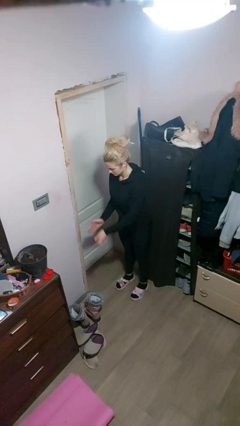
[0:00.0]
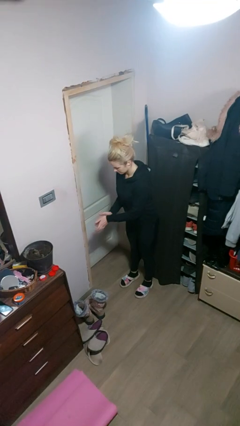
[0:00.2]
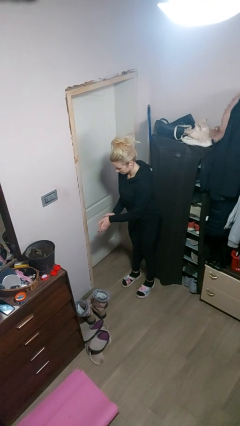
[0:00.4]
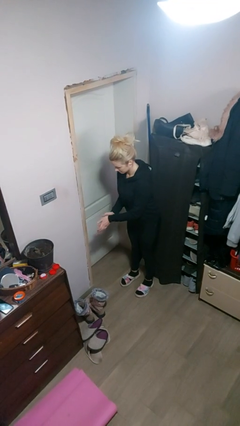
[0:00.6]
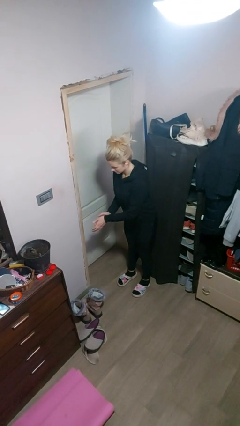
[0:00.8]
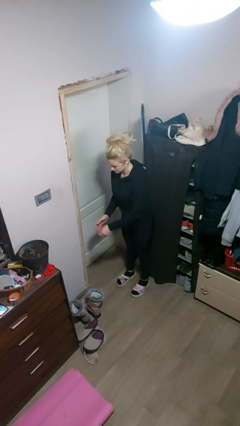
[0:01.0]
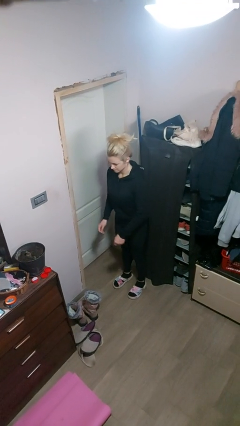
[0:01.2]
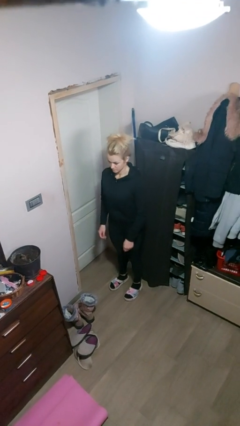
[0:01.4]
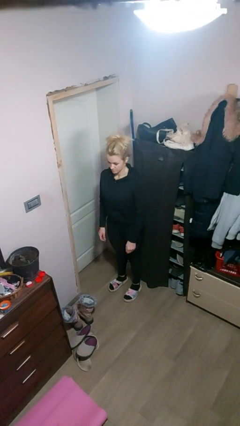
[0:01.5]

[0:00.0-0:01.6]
person claps hands

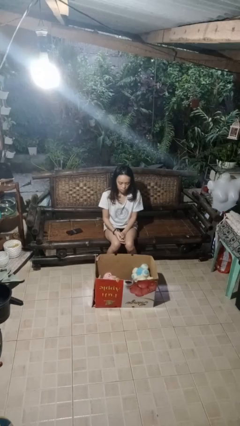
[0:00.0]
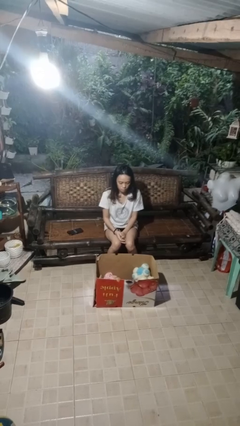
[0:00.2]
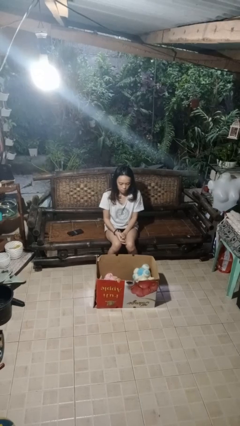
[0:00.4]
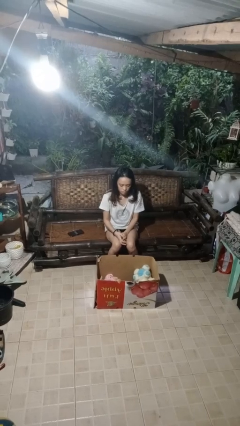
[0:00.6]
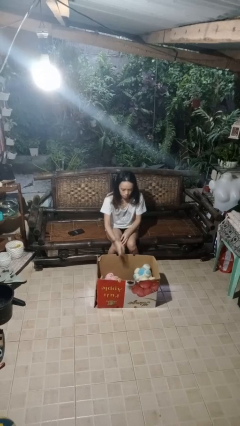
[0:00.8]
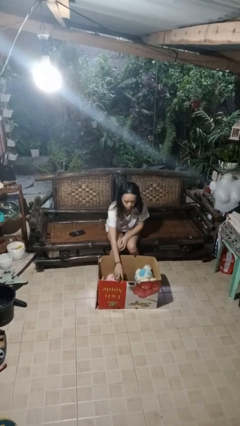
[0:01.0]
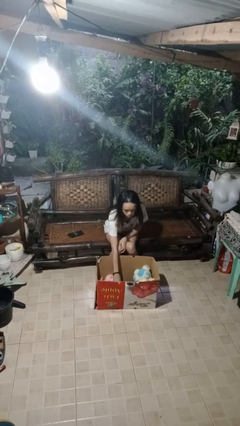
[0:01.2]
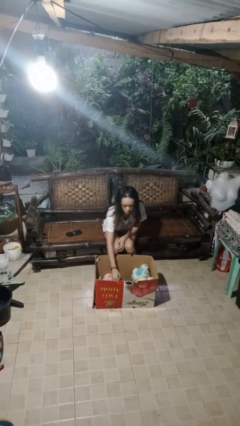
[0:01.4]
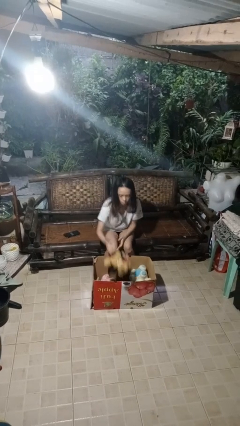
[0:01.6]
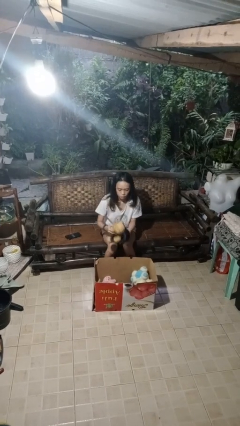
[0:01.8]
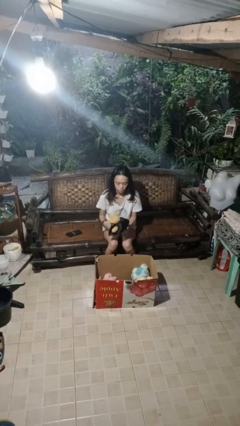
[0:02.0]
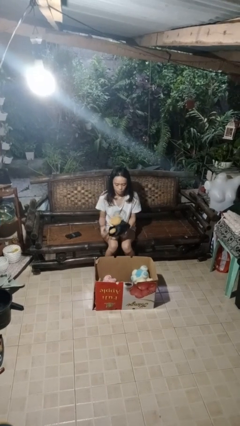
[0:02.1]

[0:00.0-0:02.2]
person takes object from box

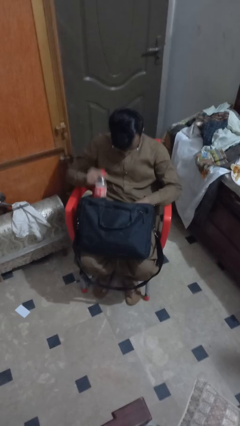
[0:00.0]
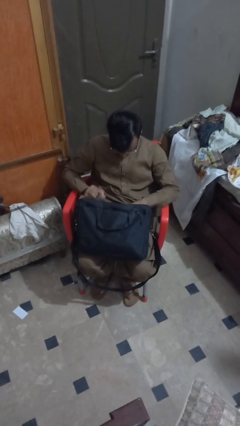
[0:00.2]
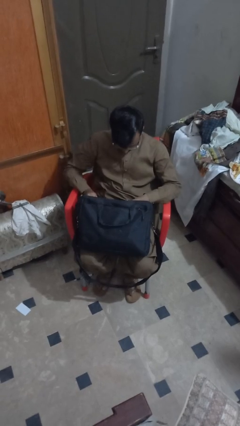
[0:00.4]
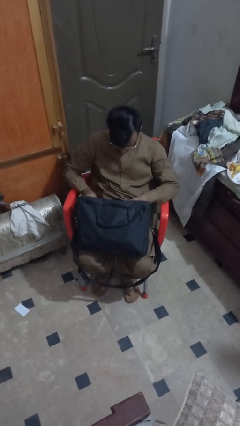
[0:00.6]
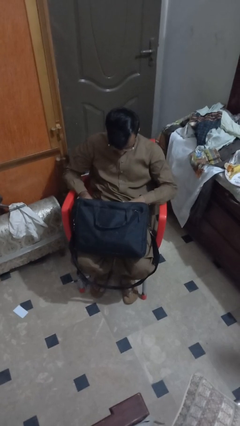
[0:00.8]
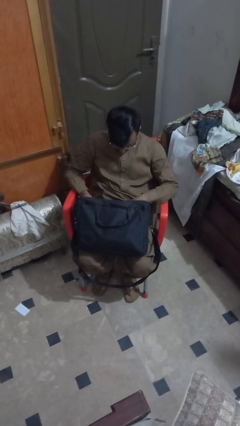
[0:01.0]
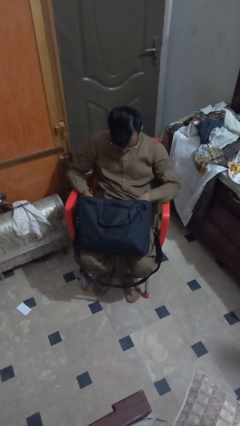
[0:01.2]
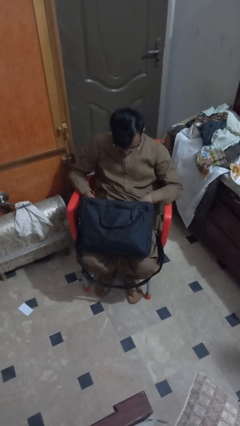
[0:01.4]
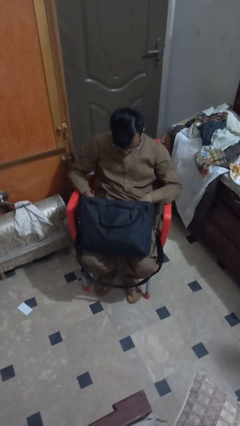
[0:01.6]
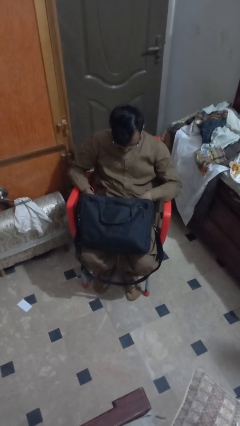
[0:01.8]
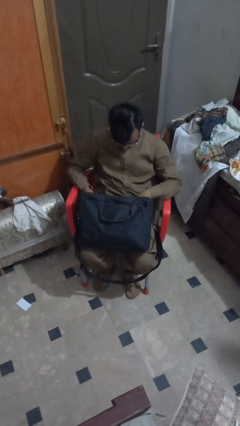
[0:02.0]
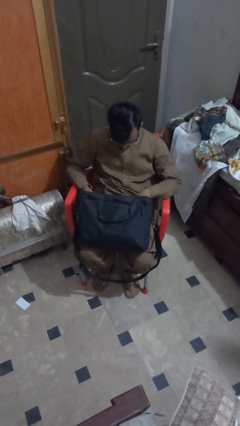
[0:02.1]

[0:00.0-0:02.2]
person puts object into bag

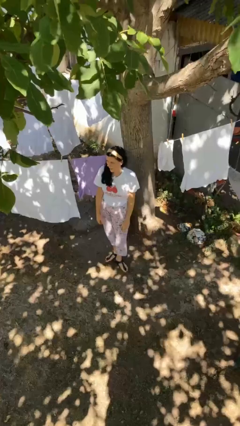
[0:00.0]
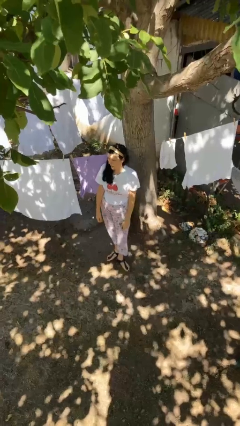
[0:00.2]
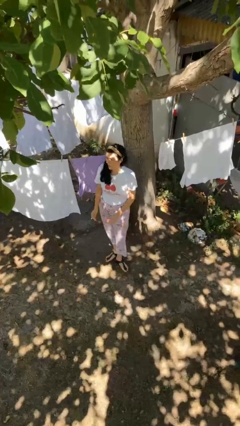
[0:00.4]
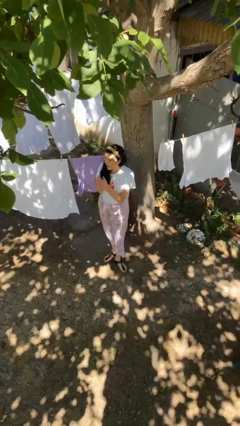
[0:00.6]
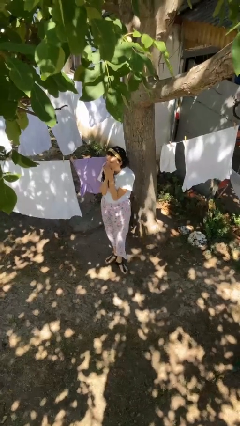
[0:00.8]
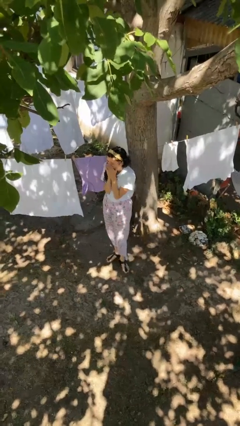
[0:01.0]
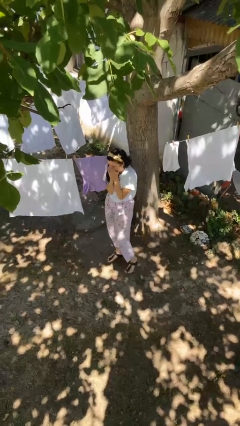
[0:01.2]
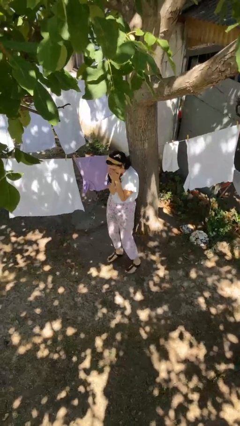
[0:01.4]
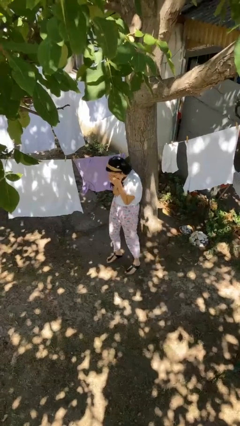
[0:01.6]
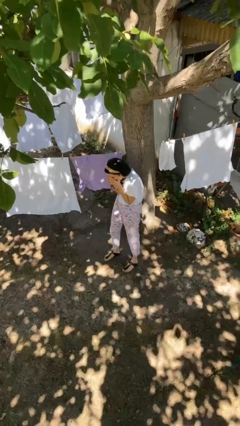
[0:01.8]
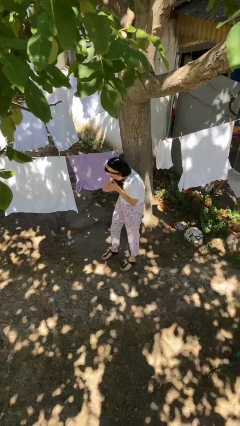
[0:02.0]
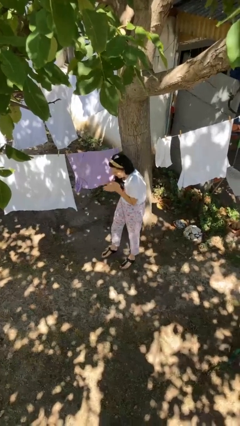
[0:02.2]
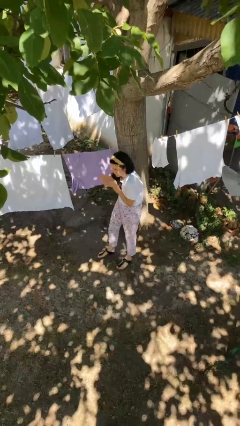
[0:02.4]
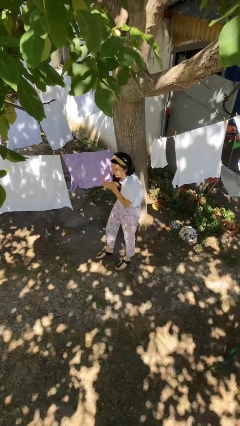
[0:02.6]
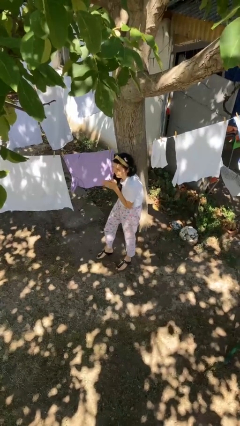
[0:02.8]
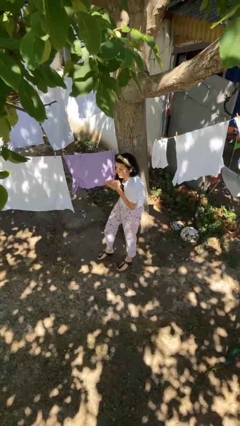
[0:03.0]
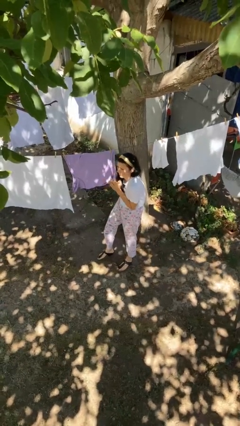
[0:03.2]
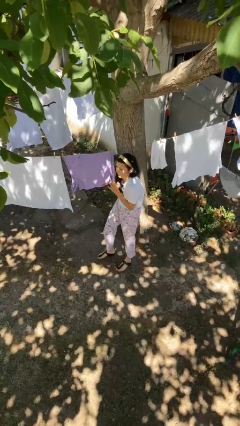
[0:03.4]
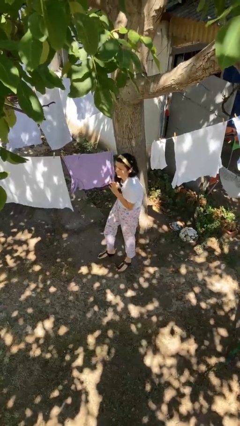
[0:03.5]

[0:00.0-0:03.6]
person blows into hands

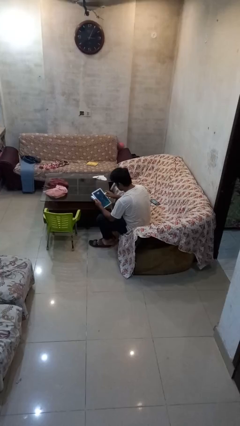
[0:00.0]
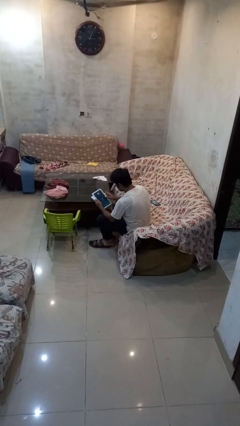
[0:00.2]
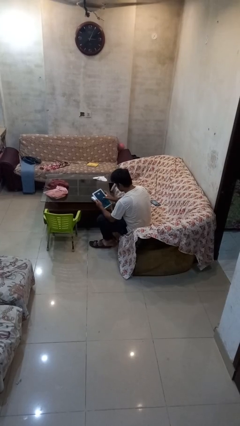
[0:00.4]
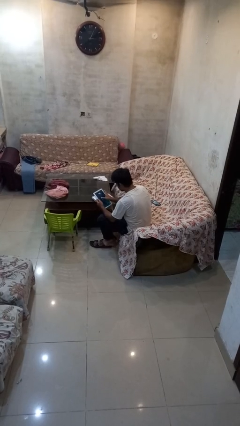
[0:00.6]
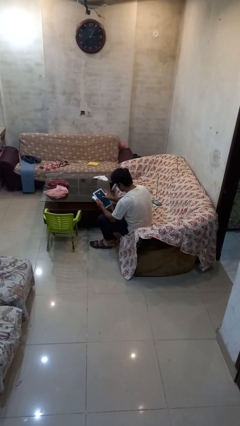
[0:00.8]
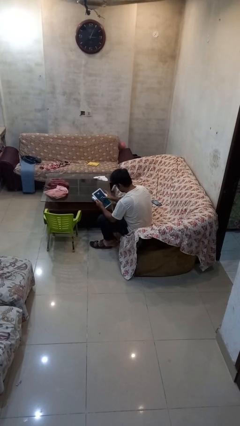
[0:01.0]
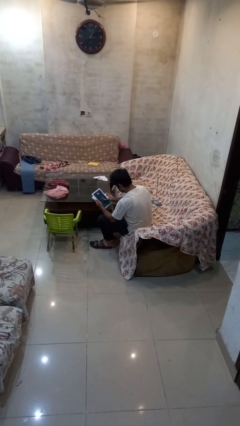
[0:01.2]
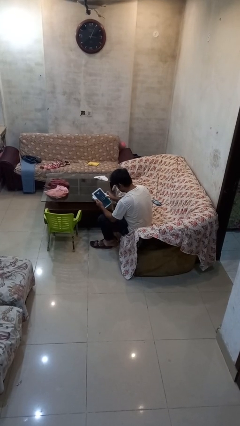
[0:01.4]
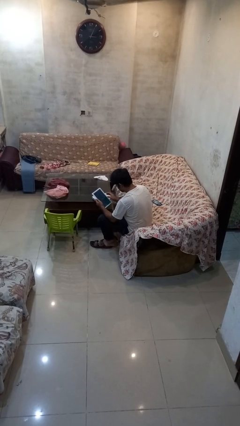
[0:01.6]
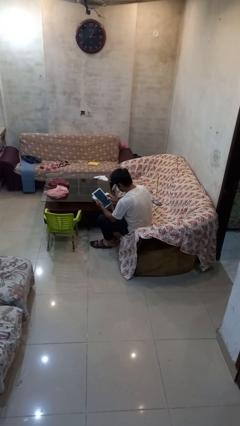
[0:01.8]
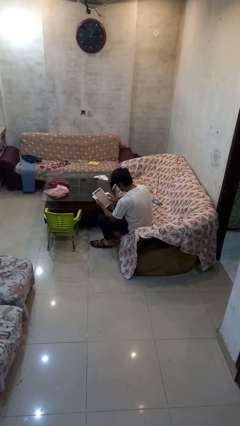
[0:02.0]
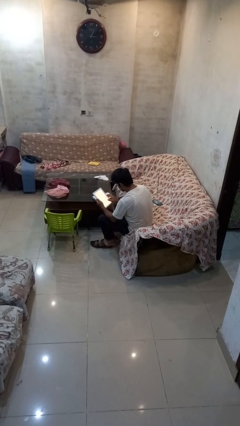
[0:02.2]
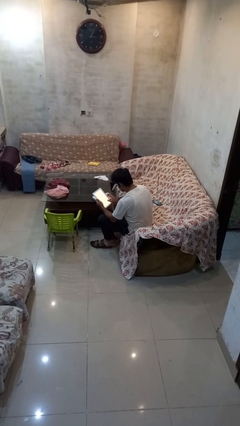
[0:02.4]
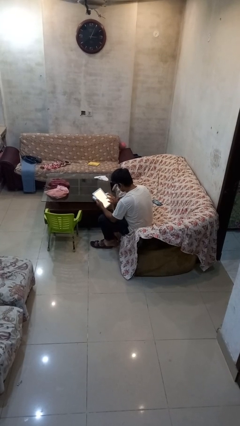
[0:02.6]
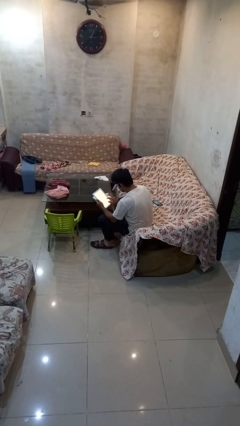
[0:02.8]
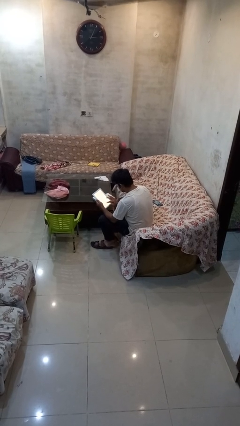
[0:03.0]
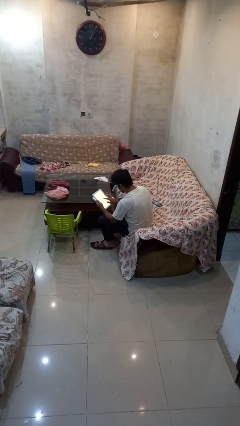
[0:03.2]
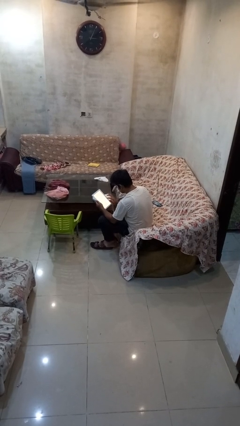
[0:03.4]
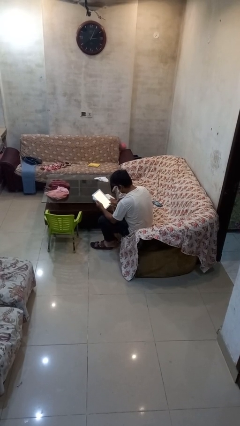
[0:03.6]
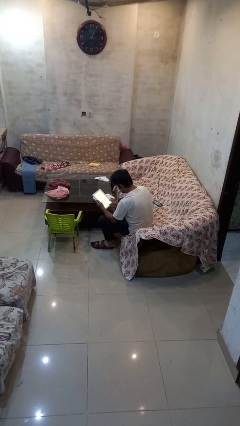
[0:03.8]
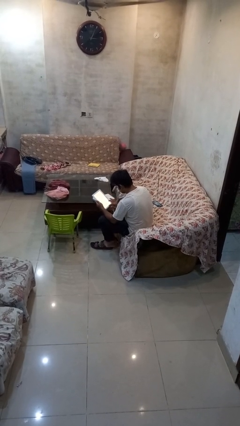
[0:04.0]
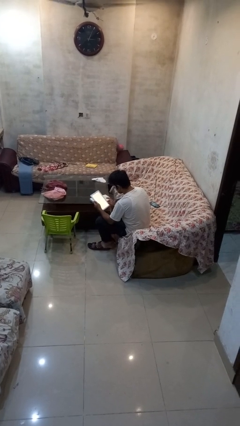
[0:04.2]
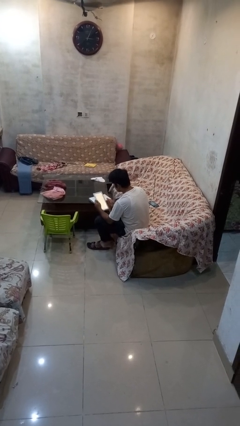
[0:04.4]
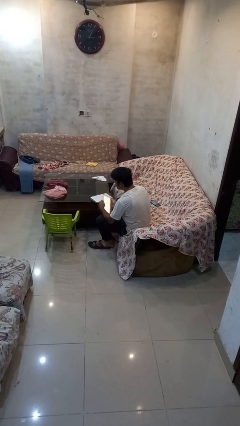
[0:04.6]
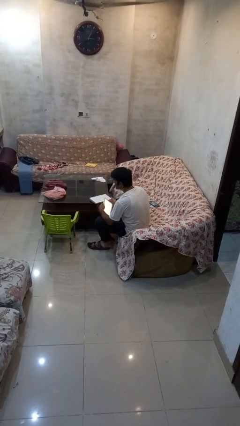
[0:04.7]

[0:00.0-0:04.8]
person interacts with tablet

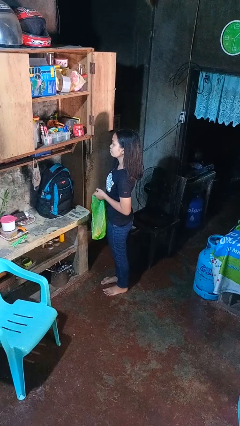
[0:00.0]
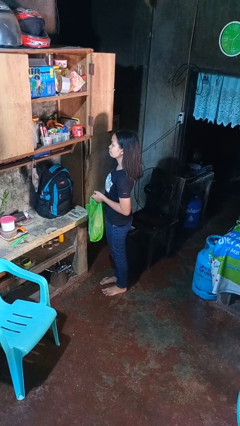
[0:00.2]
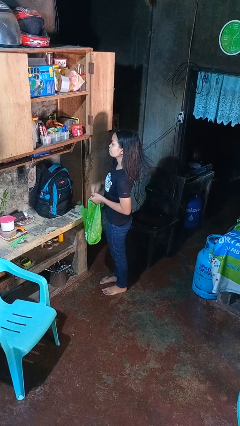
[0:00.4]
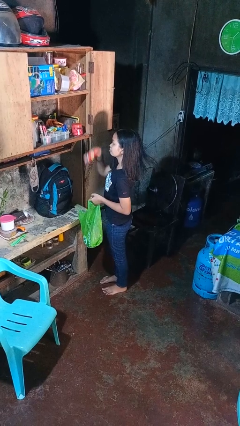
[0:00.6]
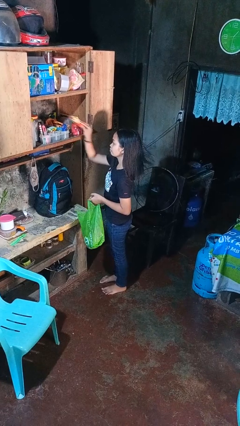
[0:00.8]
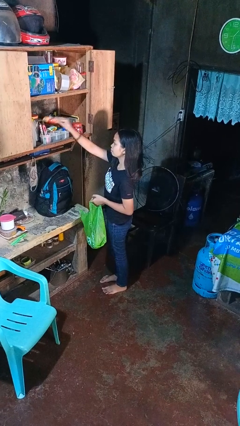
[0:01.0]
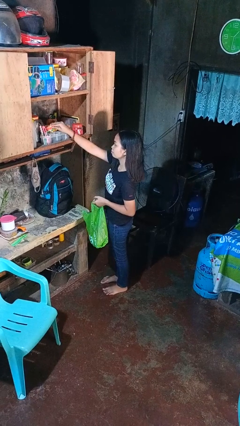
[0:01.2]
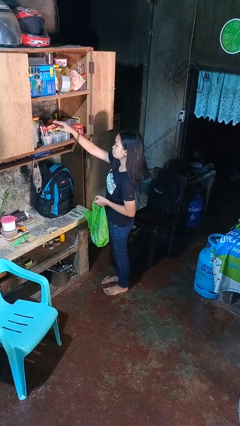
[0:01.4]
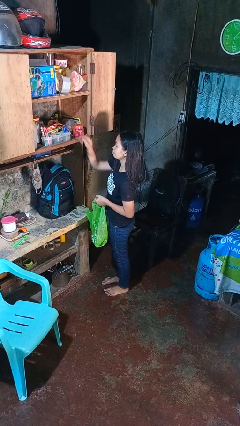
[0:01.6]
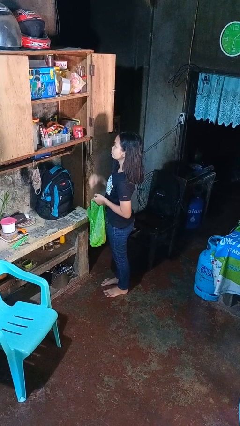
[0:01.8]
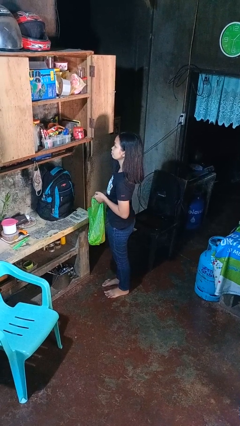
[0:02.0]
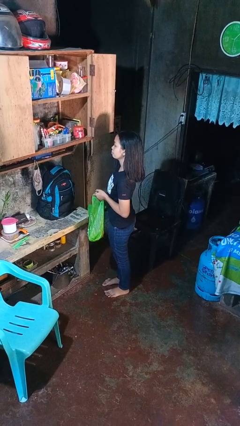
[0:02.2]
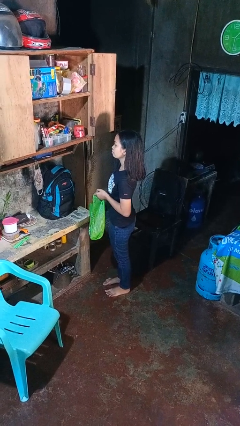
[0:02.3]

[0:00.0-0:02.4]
person loads groceries into cabinet

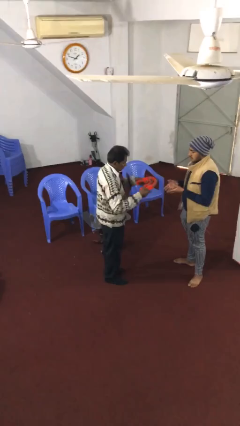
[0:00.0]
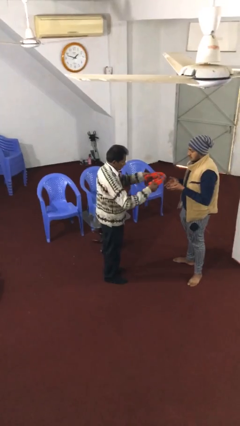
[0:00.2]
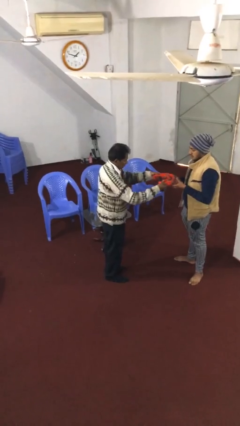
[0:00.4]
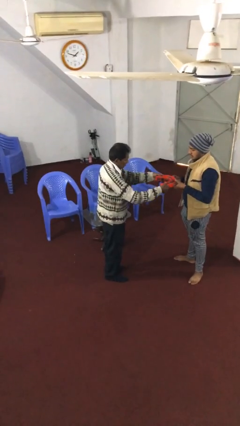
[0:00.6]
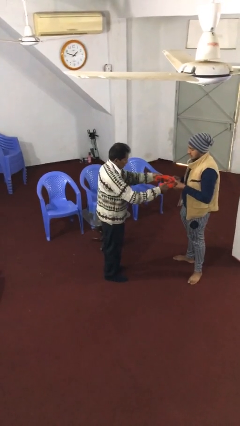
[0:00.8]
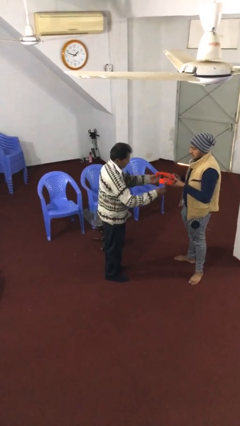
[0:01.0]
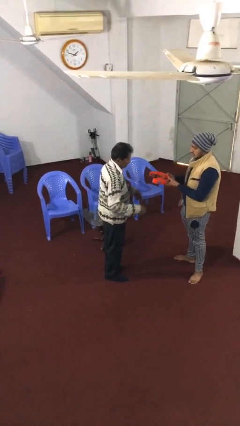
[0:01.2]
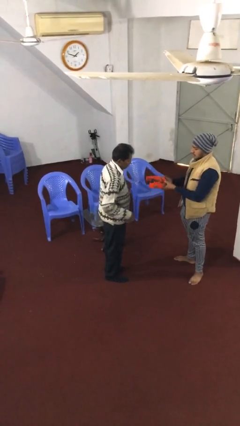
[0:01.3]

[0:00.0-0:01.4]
person transfers object to person
